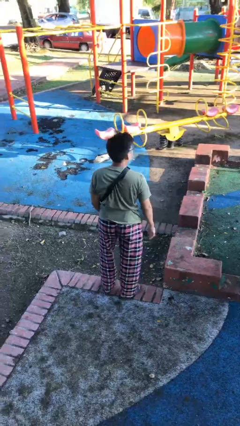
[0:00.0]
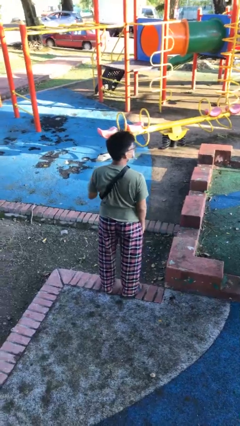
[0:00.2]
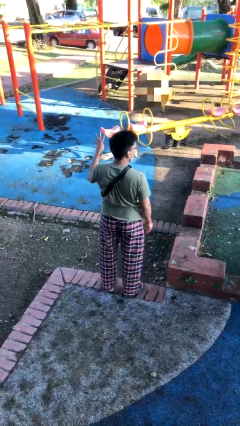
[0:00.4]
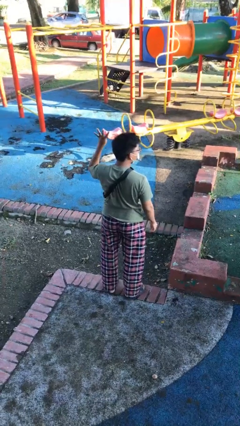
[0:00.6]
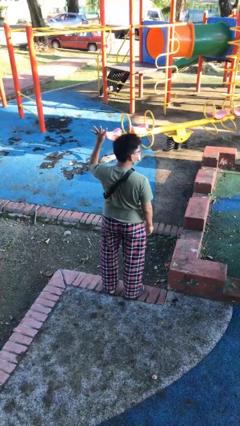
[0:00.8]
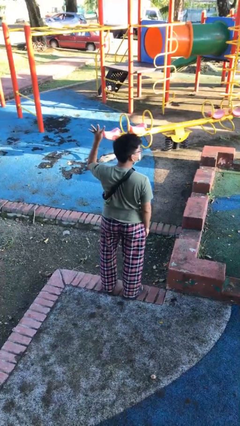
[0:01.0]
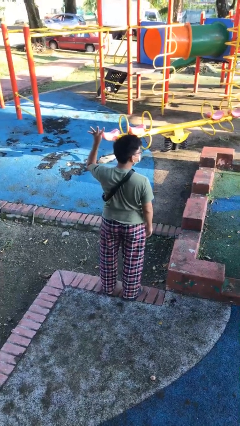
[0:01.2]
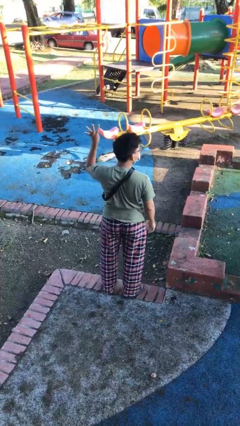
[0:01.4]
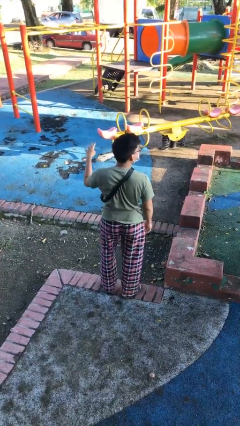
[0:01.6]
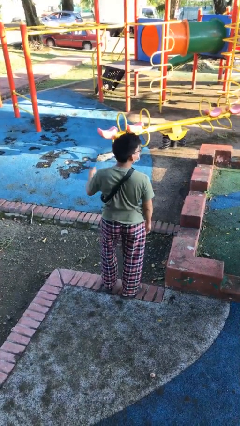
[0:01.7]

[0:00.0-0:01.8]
person gestures number four

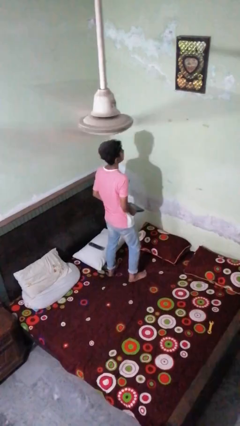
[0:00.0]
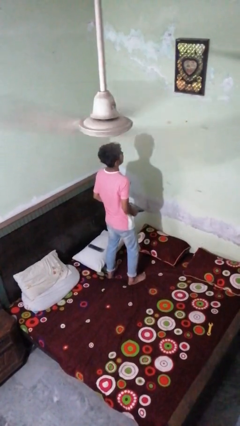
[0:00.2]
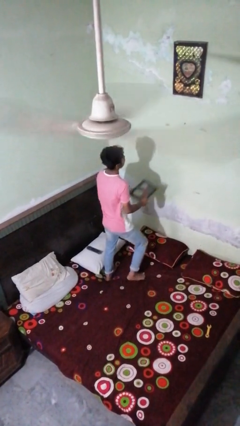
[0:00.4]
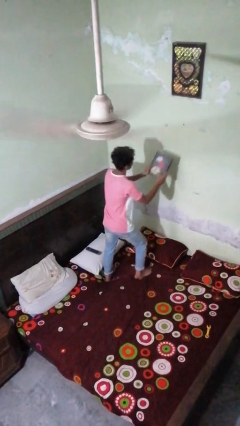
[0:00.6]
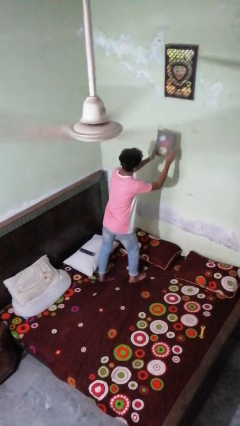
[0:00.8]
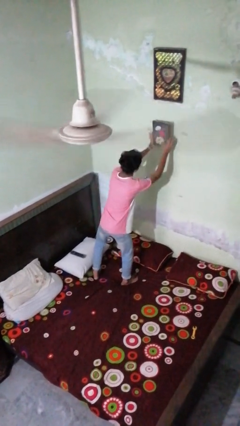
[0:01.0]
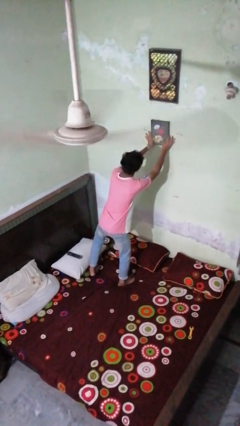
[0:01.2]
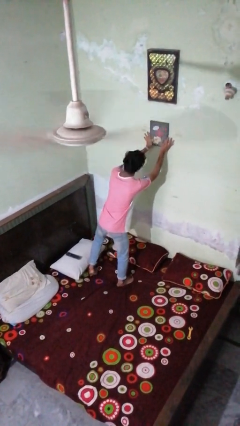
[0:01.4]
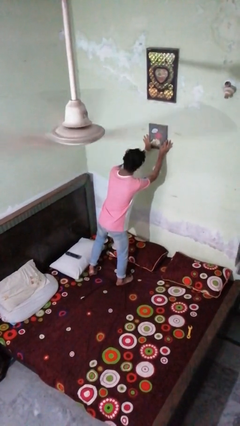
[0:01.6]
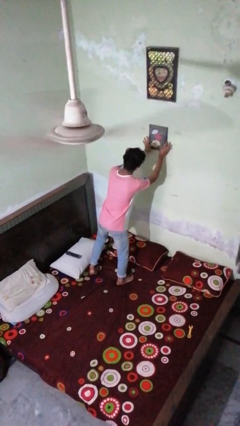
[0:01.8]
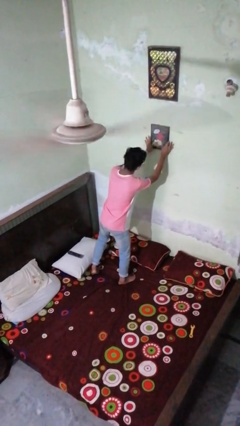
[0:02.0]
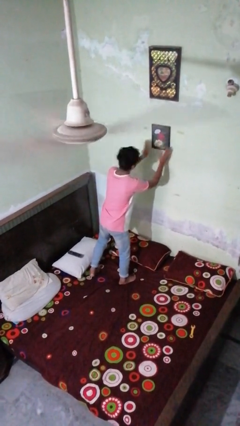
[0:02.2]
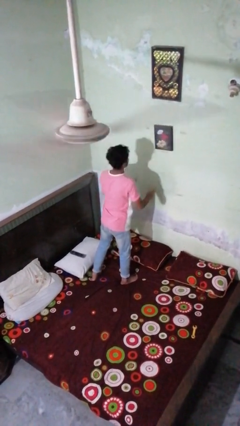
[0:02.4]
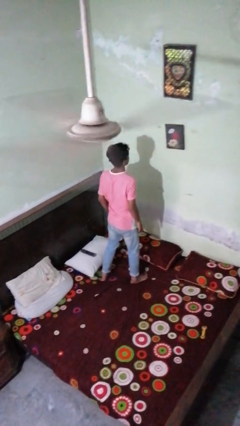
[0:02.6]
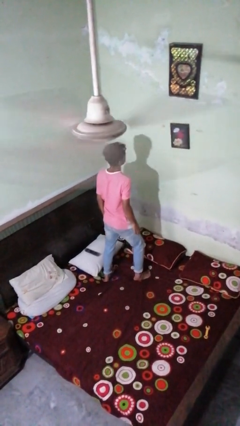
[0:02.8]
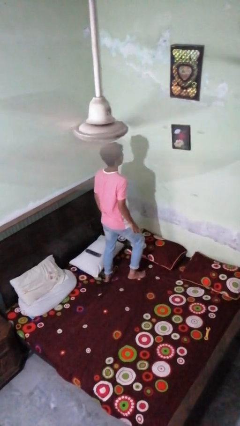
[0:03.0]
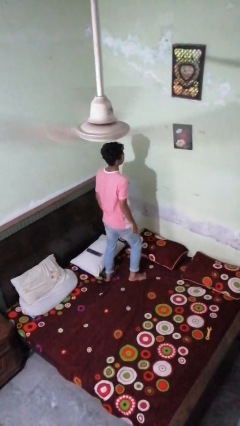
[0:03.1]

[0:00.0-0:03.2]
person puts up picture frame

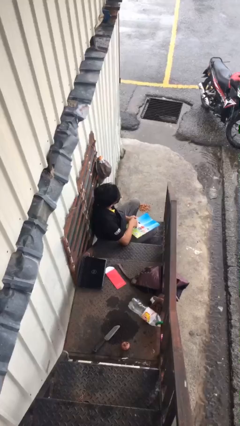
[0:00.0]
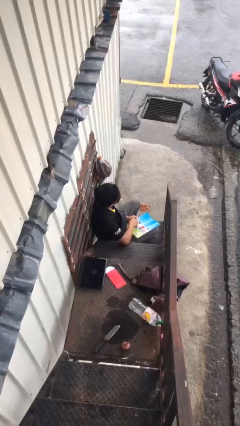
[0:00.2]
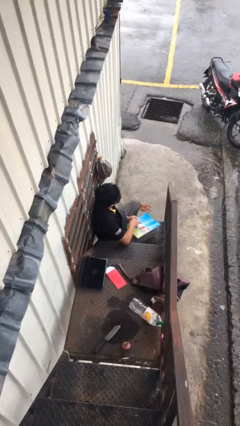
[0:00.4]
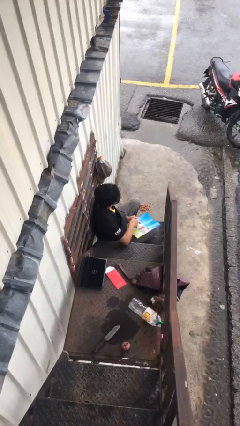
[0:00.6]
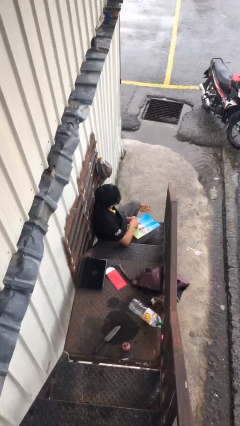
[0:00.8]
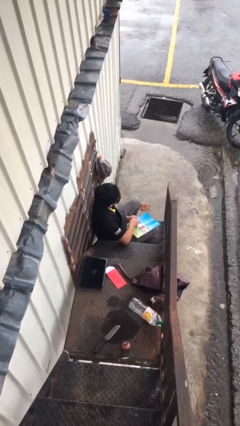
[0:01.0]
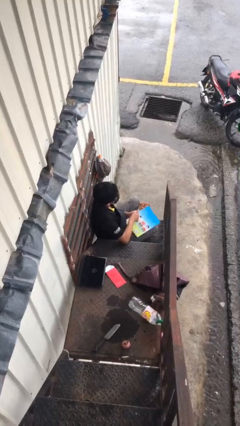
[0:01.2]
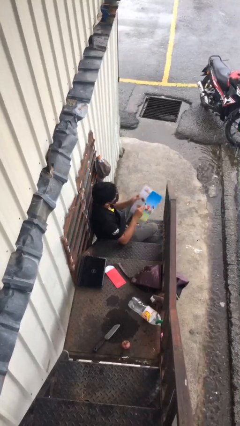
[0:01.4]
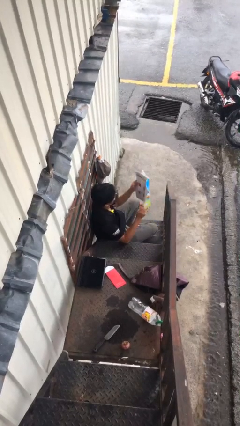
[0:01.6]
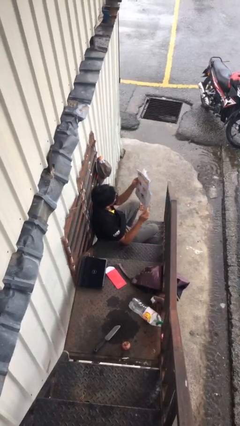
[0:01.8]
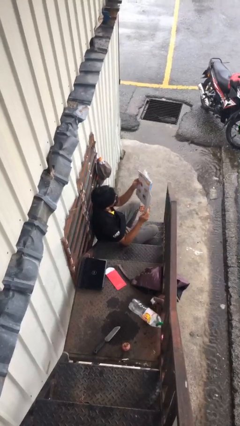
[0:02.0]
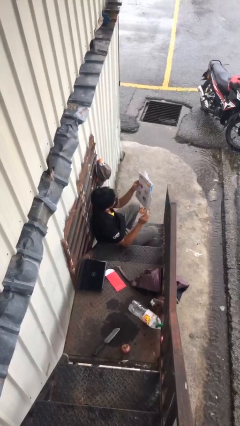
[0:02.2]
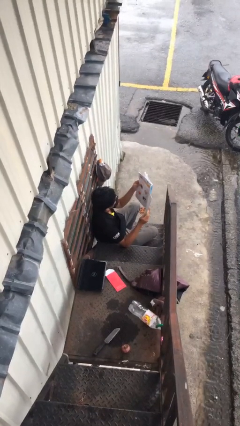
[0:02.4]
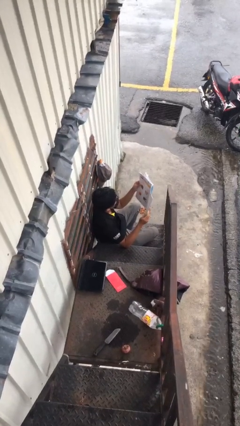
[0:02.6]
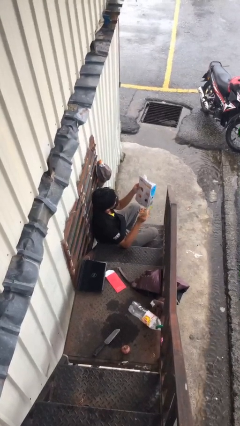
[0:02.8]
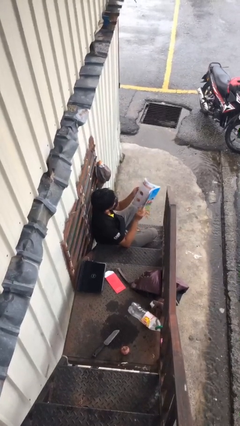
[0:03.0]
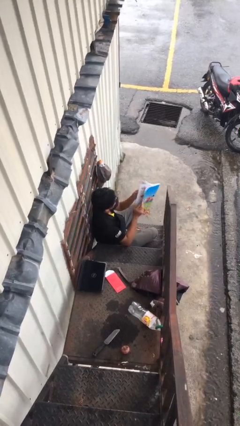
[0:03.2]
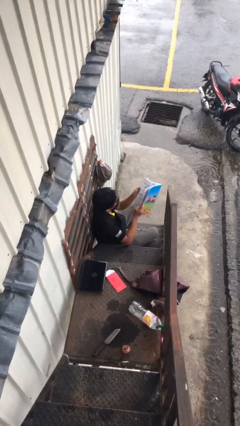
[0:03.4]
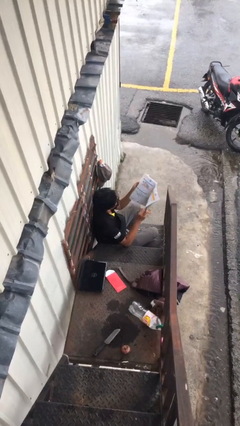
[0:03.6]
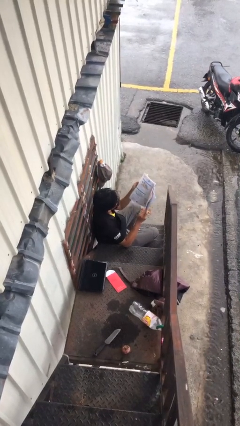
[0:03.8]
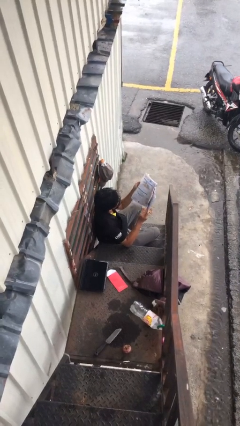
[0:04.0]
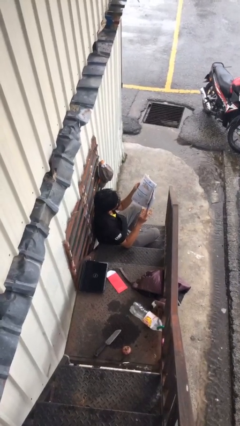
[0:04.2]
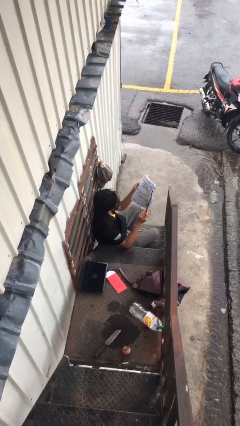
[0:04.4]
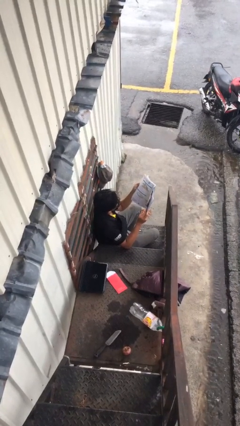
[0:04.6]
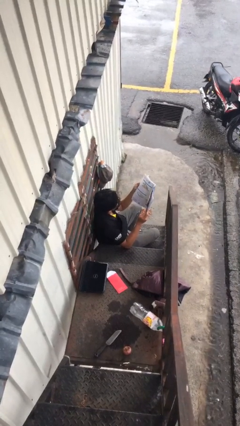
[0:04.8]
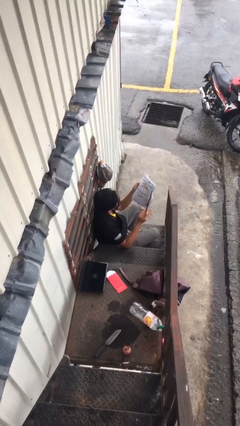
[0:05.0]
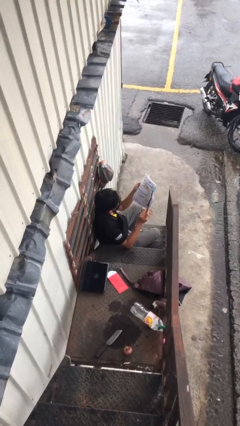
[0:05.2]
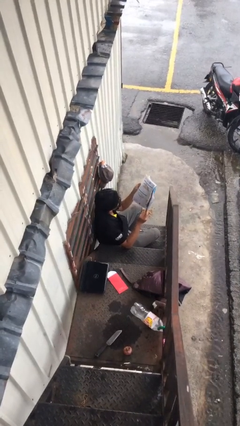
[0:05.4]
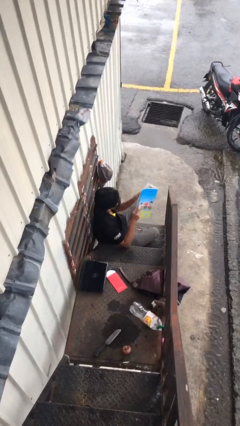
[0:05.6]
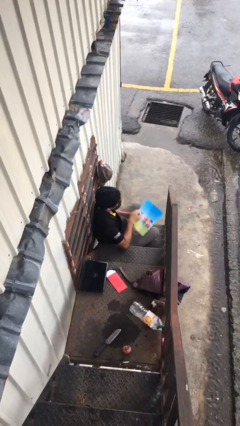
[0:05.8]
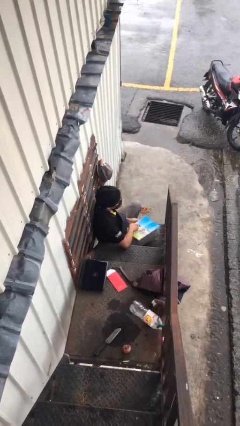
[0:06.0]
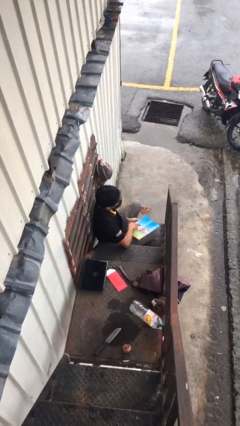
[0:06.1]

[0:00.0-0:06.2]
person reads document

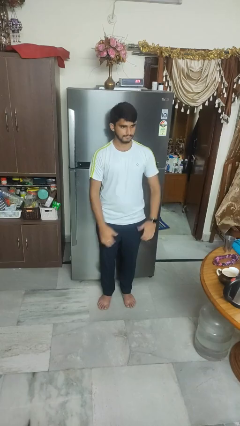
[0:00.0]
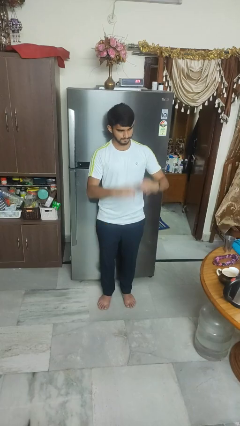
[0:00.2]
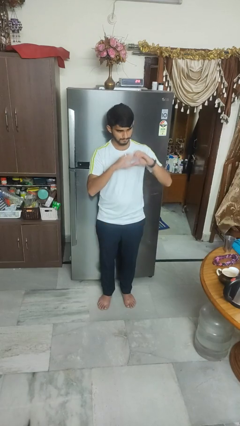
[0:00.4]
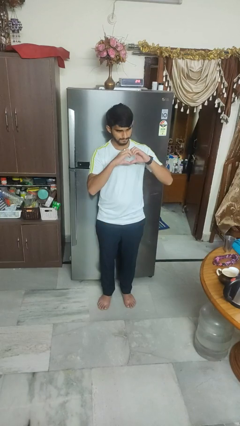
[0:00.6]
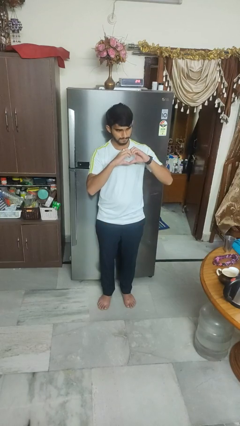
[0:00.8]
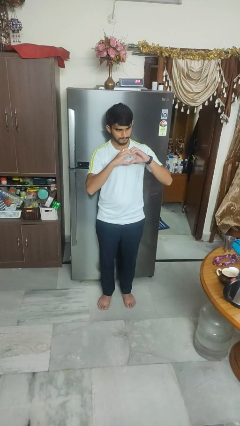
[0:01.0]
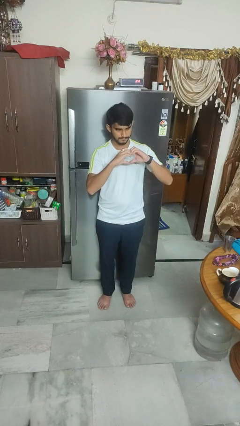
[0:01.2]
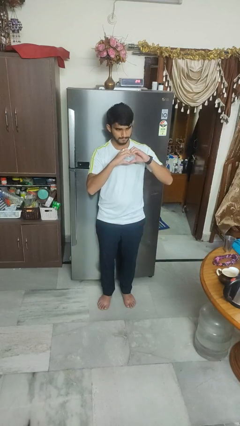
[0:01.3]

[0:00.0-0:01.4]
person gestures heart

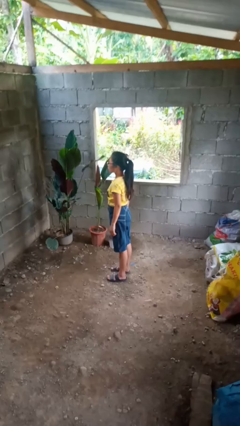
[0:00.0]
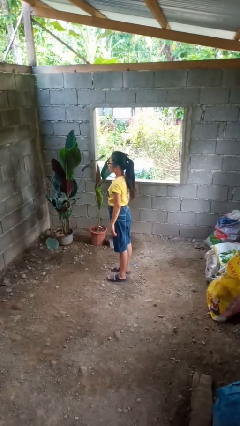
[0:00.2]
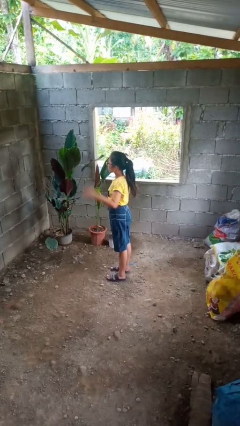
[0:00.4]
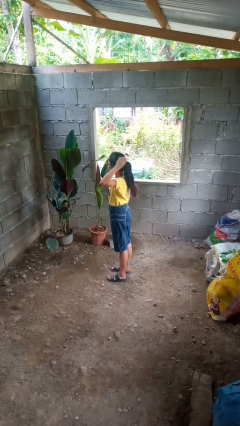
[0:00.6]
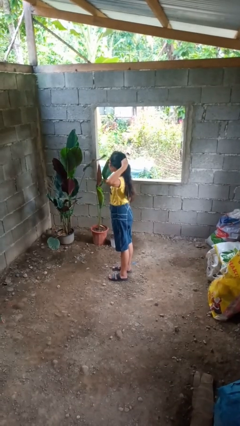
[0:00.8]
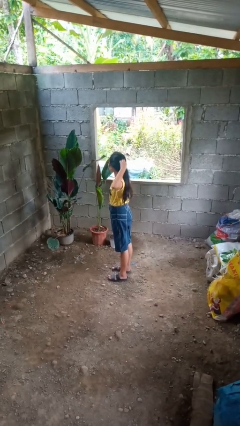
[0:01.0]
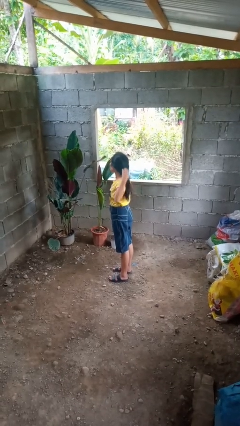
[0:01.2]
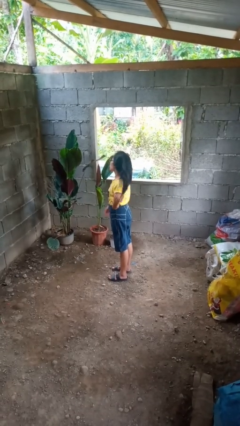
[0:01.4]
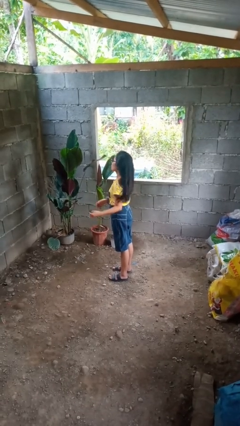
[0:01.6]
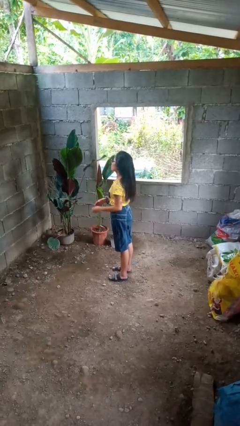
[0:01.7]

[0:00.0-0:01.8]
person takes off hairtie

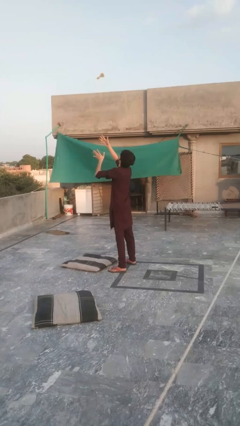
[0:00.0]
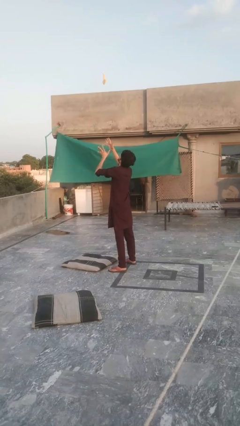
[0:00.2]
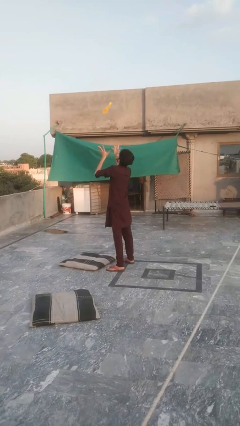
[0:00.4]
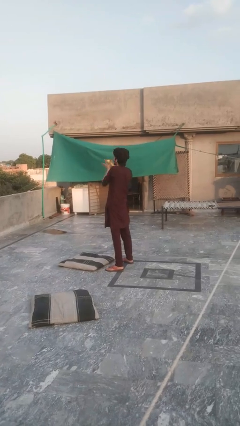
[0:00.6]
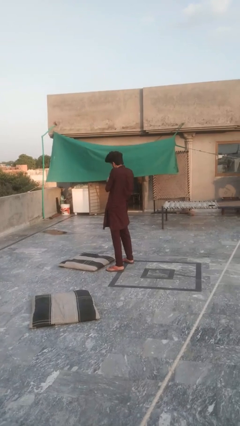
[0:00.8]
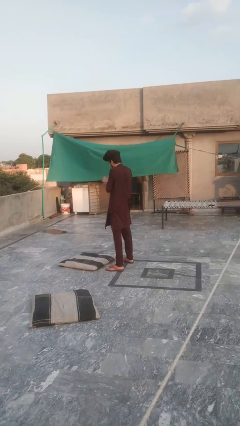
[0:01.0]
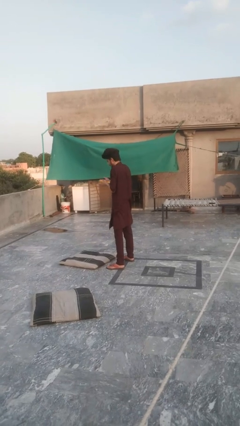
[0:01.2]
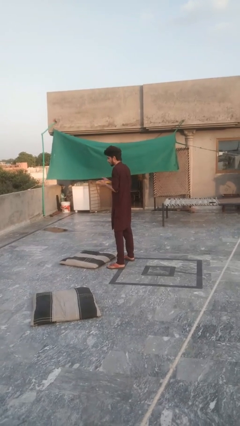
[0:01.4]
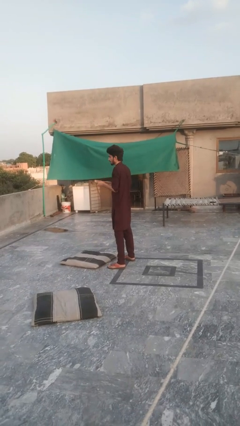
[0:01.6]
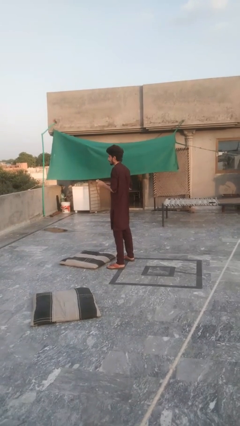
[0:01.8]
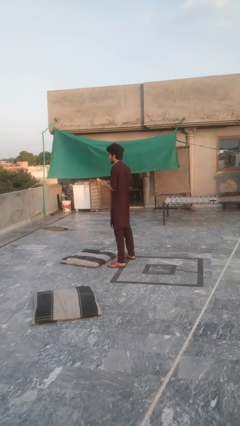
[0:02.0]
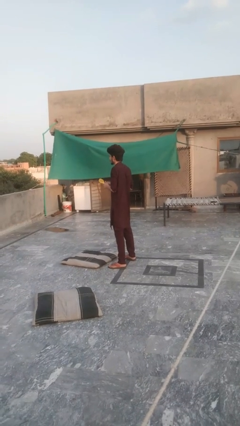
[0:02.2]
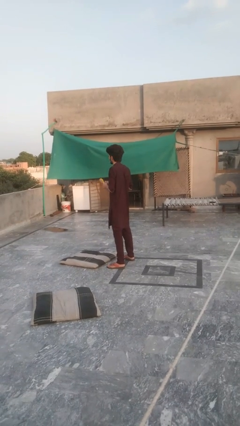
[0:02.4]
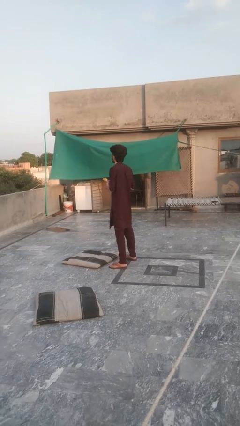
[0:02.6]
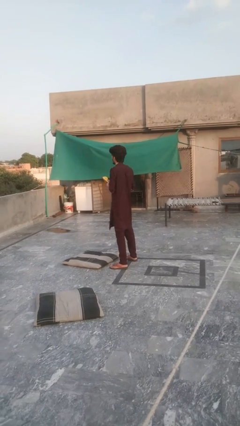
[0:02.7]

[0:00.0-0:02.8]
person catches dropped object
